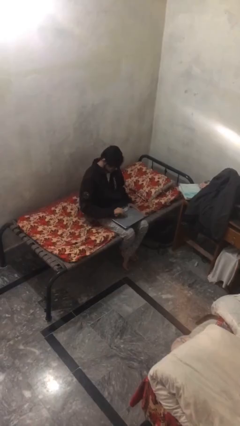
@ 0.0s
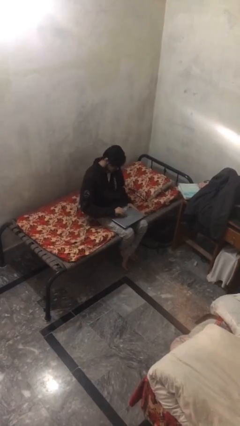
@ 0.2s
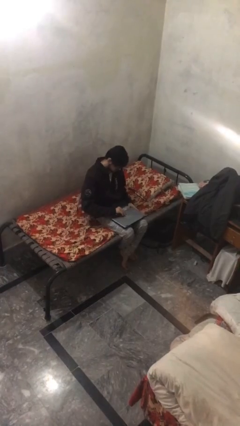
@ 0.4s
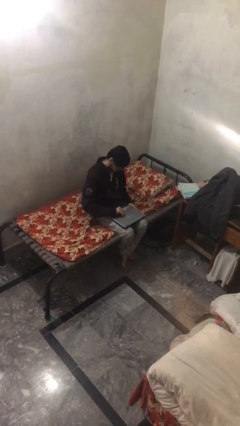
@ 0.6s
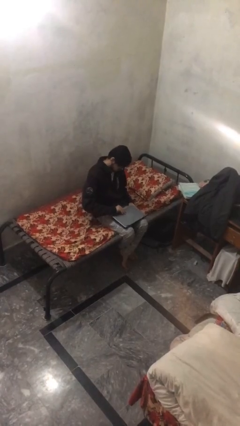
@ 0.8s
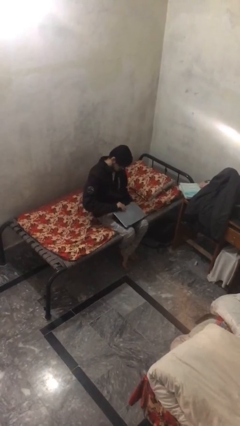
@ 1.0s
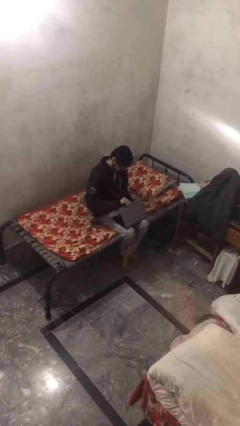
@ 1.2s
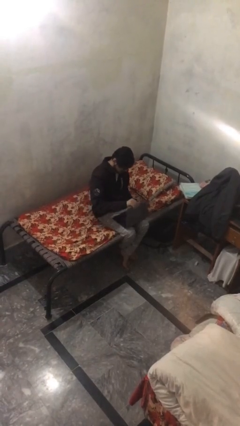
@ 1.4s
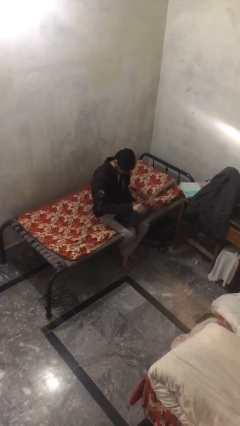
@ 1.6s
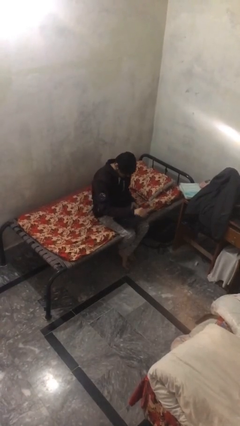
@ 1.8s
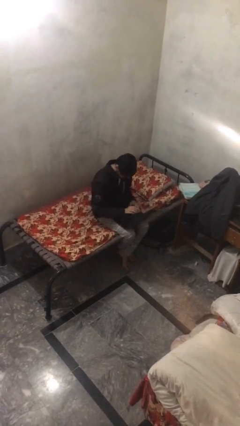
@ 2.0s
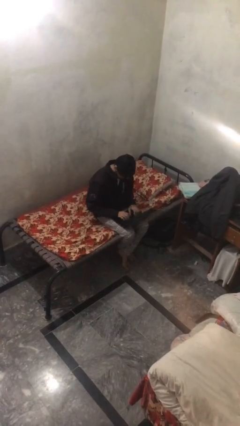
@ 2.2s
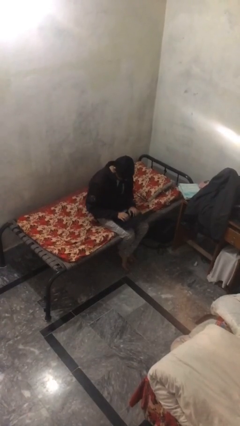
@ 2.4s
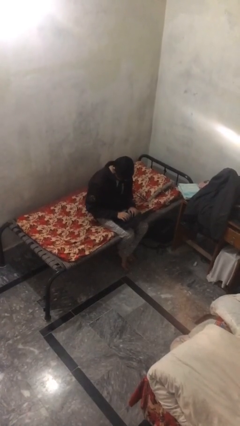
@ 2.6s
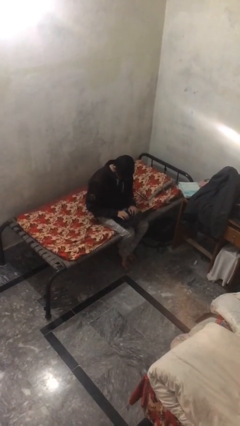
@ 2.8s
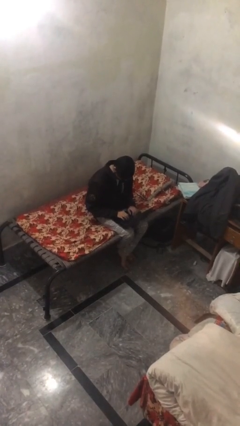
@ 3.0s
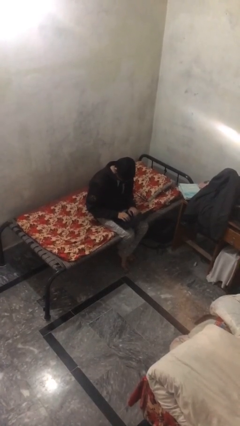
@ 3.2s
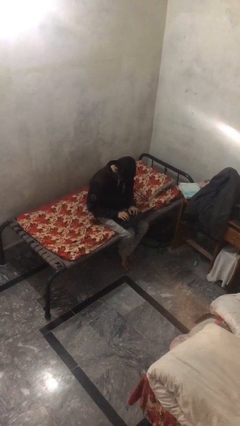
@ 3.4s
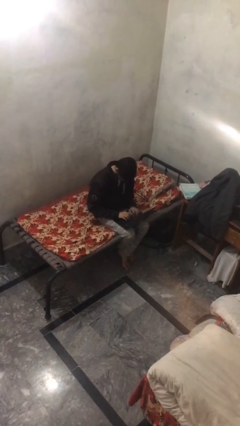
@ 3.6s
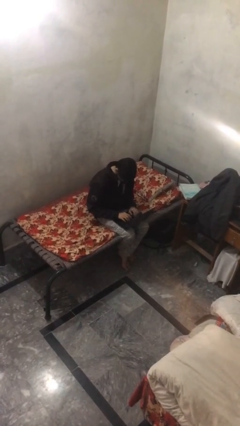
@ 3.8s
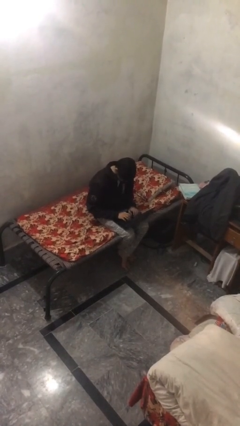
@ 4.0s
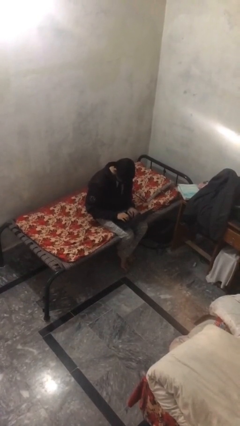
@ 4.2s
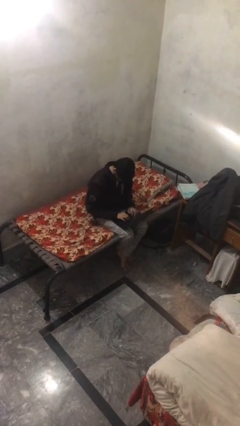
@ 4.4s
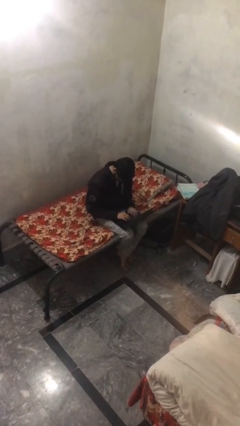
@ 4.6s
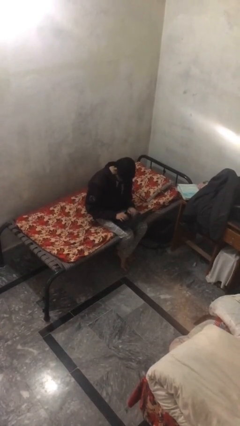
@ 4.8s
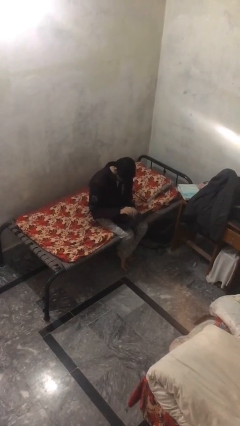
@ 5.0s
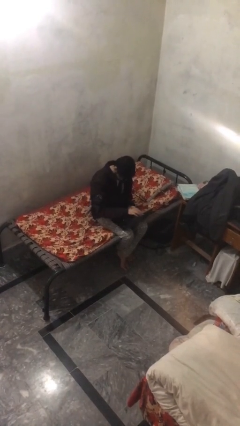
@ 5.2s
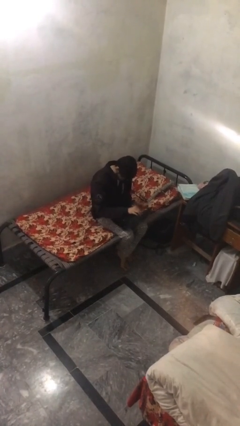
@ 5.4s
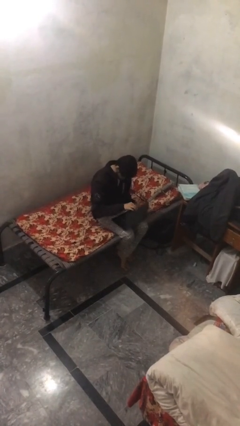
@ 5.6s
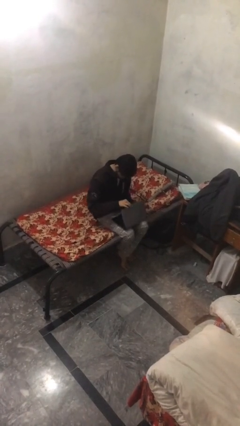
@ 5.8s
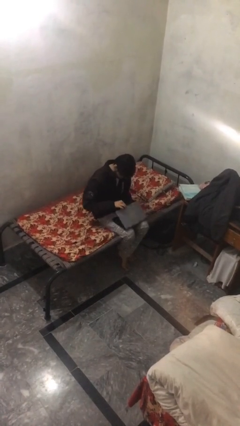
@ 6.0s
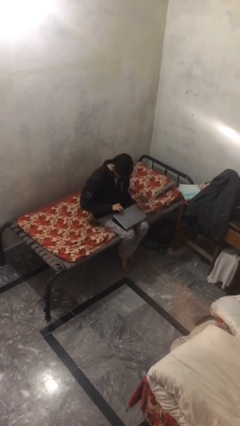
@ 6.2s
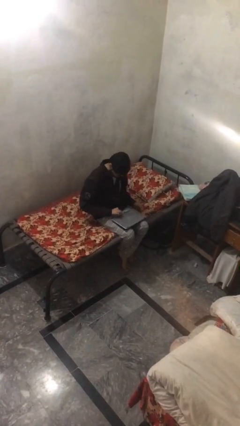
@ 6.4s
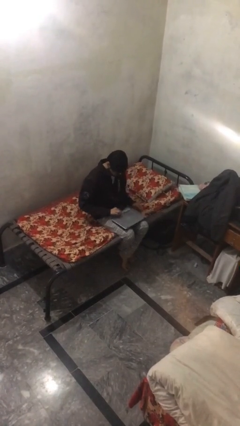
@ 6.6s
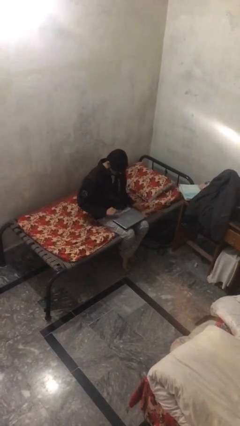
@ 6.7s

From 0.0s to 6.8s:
person interacts with laptop

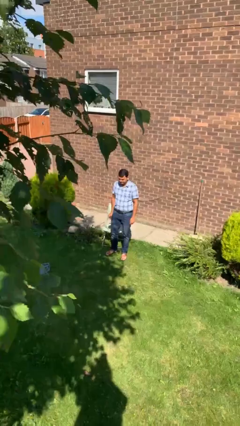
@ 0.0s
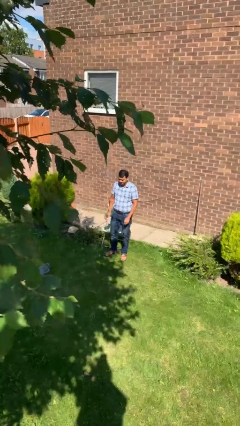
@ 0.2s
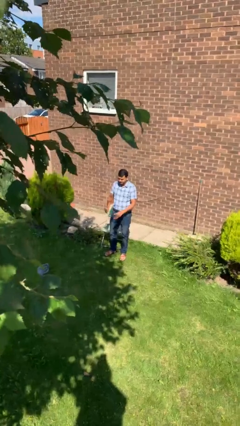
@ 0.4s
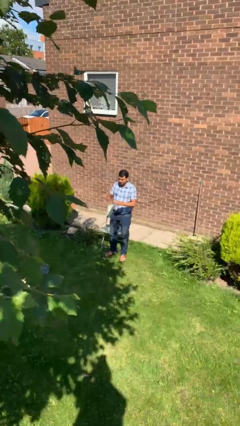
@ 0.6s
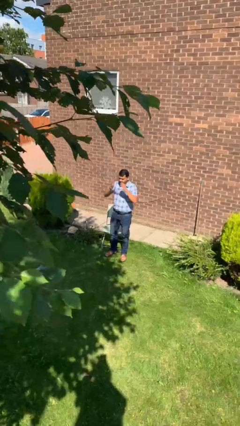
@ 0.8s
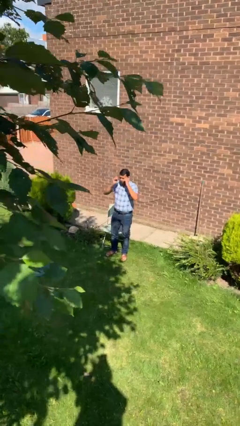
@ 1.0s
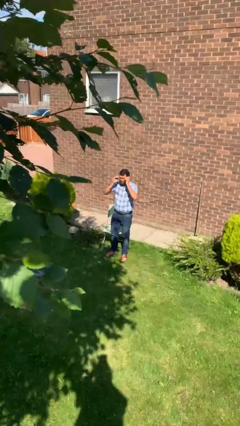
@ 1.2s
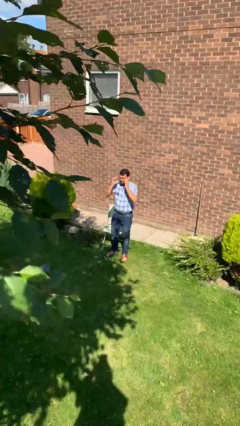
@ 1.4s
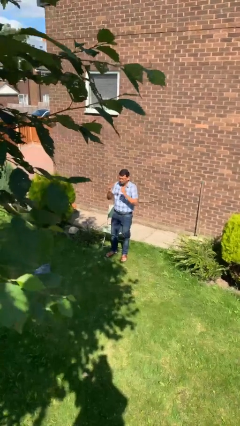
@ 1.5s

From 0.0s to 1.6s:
person puts on glasses

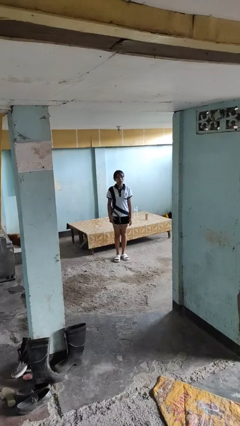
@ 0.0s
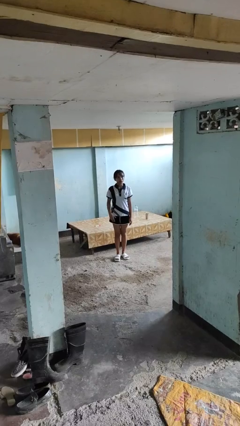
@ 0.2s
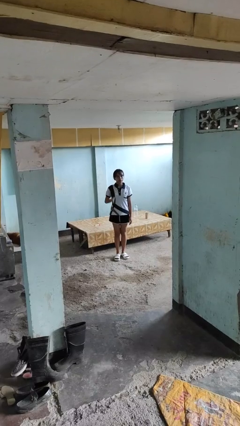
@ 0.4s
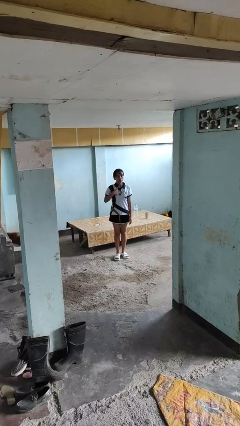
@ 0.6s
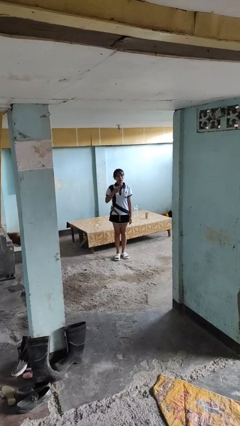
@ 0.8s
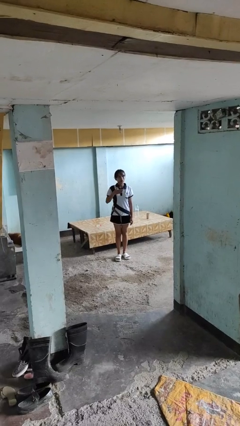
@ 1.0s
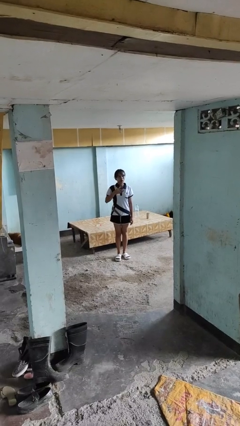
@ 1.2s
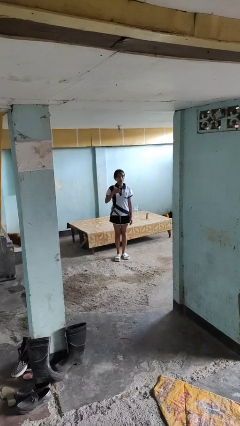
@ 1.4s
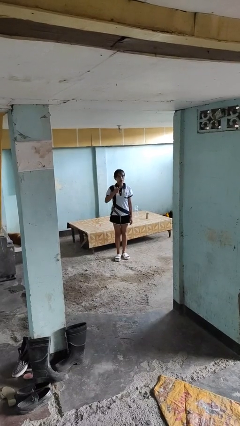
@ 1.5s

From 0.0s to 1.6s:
person drums on chest

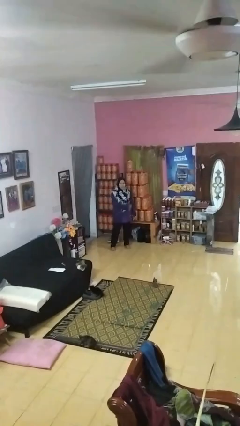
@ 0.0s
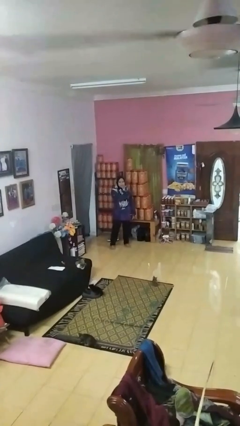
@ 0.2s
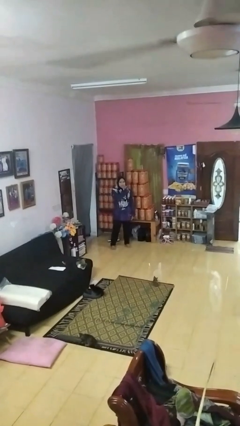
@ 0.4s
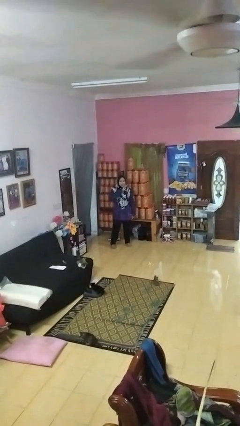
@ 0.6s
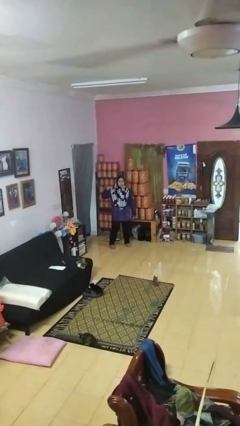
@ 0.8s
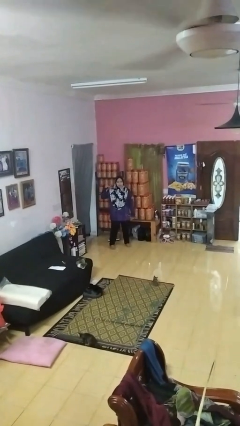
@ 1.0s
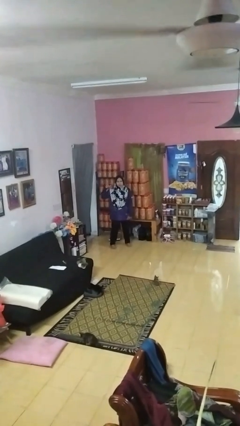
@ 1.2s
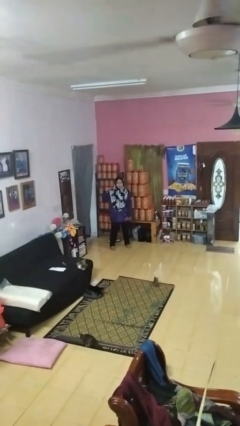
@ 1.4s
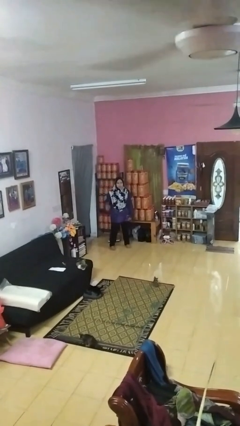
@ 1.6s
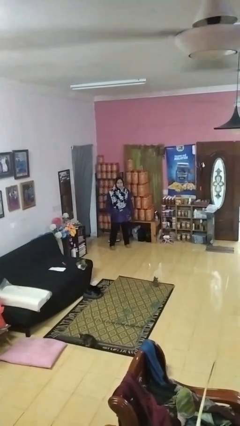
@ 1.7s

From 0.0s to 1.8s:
person gestures cut

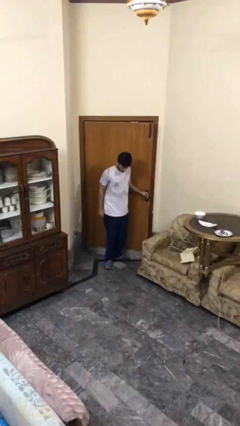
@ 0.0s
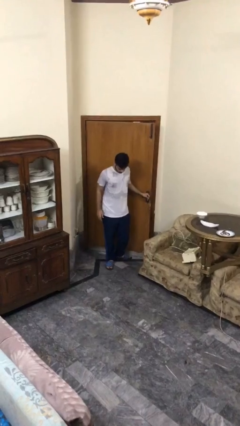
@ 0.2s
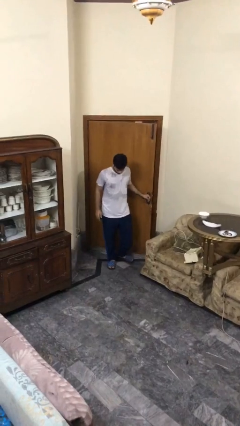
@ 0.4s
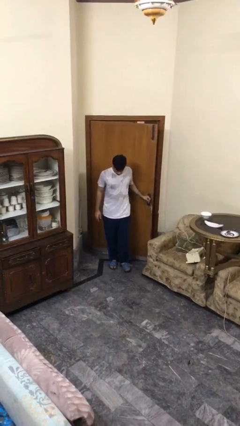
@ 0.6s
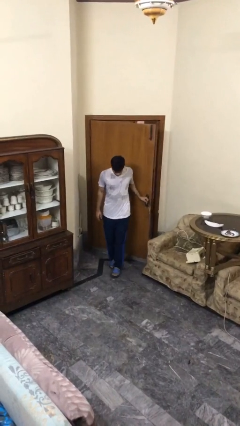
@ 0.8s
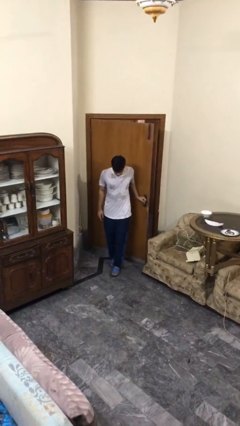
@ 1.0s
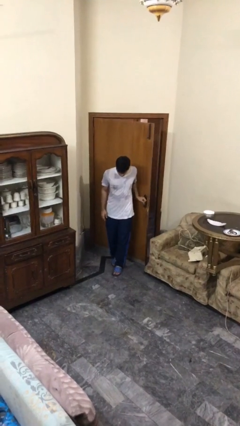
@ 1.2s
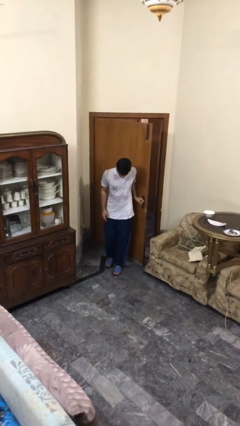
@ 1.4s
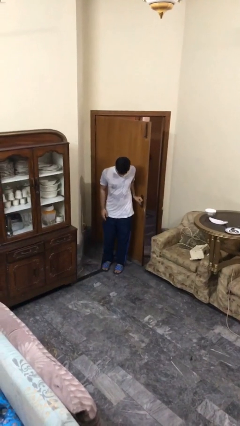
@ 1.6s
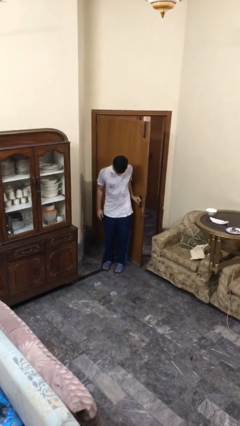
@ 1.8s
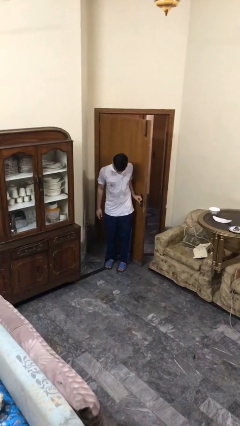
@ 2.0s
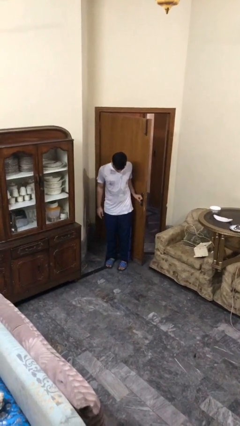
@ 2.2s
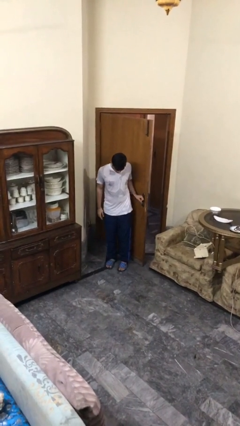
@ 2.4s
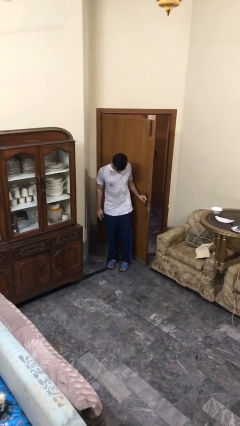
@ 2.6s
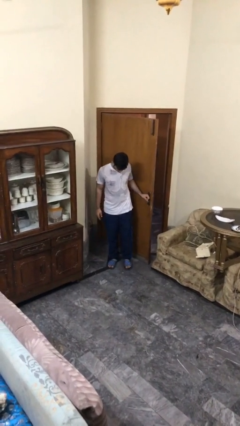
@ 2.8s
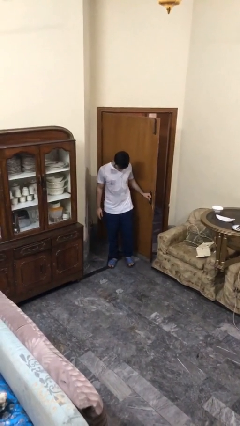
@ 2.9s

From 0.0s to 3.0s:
person opens facility door

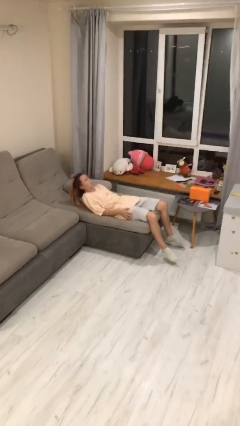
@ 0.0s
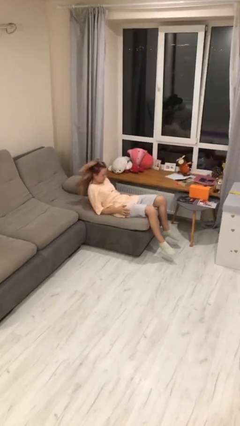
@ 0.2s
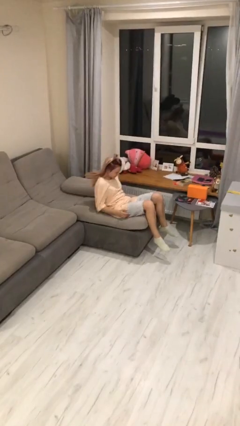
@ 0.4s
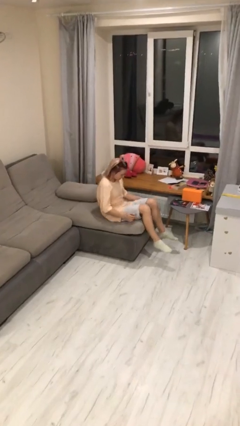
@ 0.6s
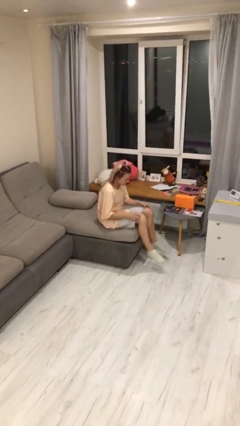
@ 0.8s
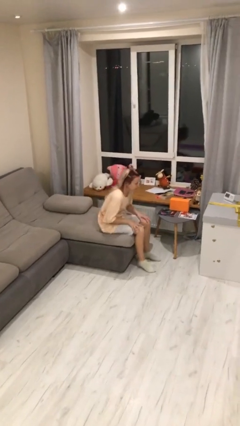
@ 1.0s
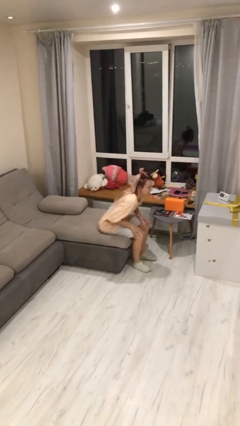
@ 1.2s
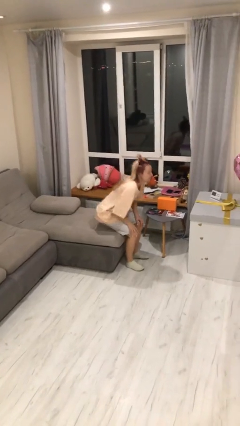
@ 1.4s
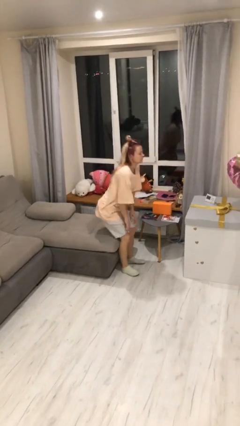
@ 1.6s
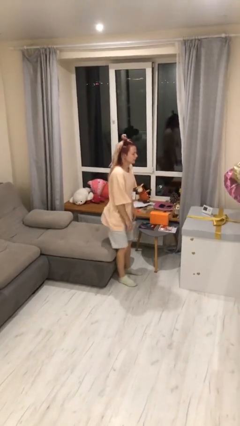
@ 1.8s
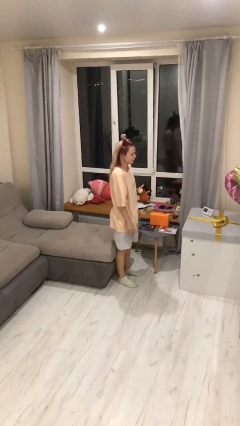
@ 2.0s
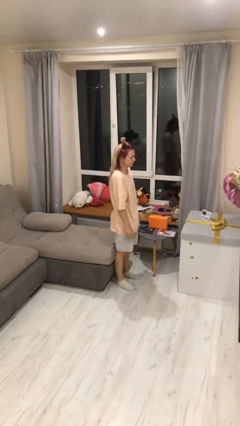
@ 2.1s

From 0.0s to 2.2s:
person stands up

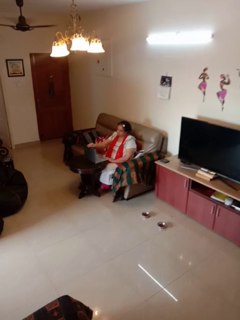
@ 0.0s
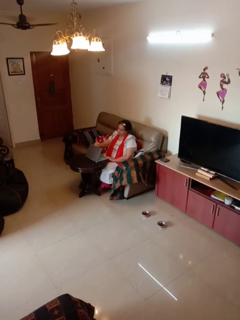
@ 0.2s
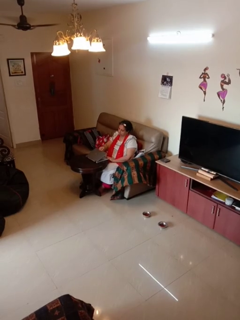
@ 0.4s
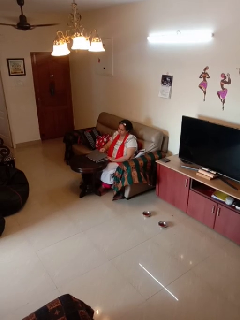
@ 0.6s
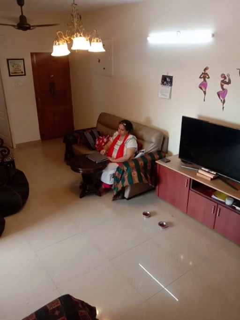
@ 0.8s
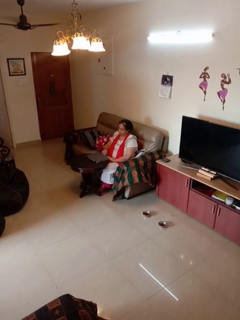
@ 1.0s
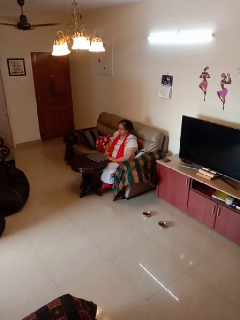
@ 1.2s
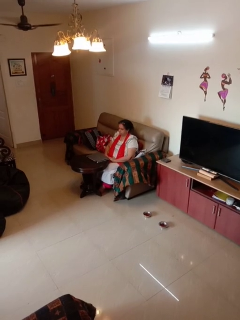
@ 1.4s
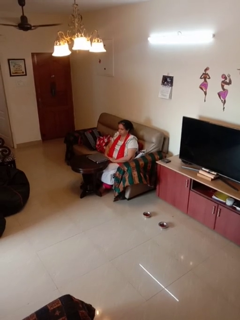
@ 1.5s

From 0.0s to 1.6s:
person closes laptop
